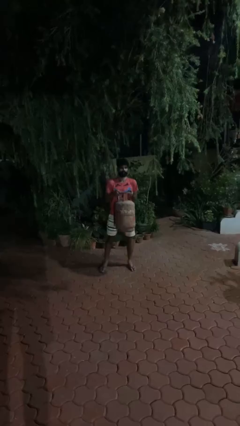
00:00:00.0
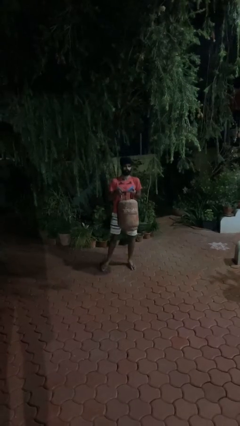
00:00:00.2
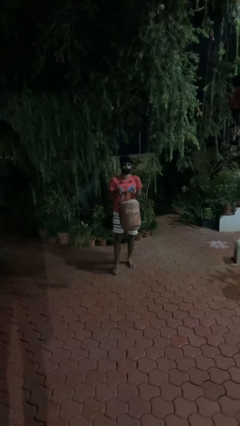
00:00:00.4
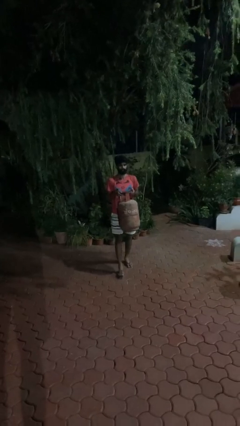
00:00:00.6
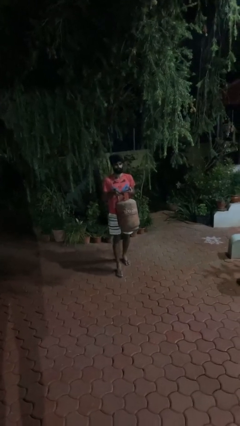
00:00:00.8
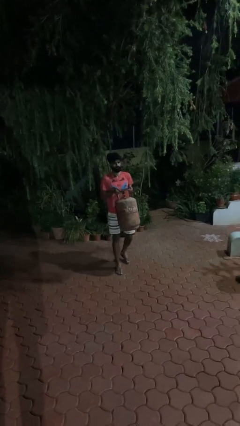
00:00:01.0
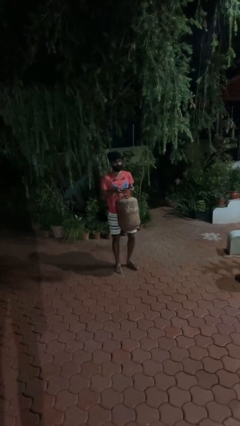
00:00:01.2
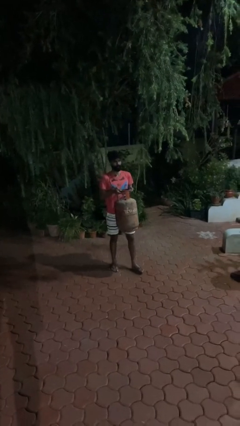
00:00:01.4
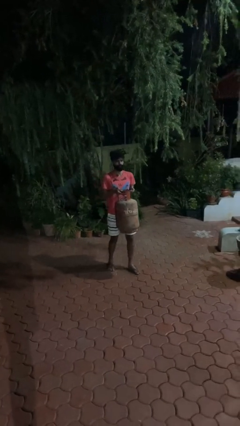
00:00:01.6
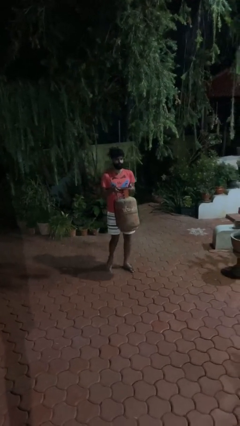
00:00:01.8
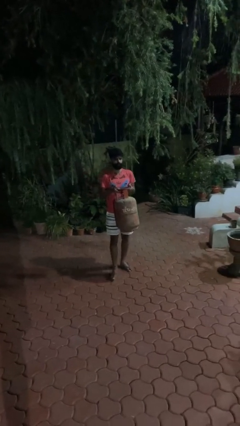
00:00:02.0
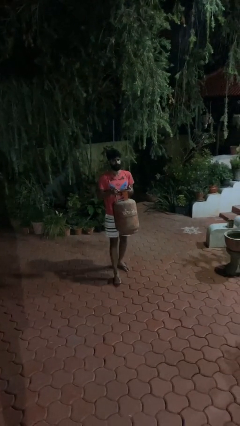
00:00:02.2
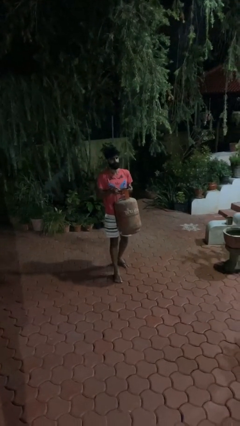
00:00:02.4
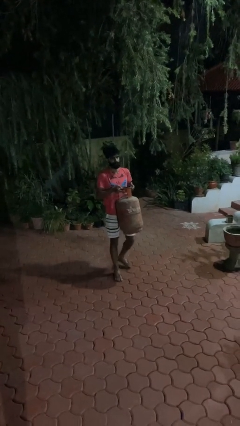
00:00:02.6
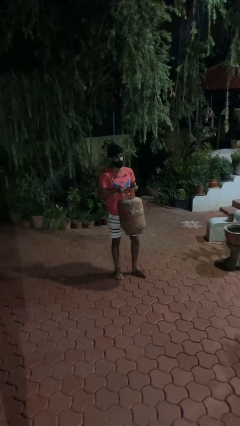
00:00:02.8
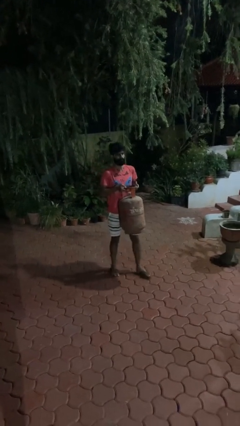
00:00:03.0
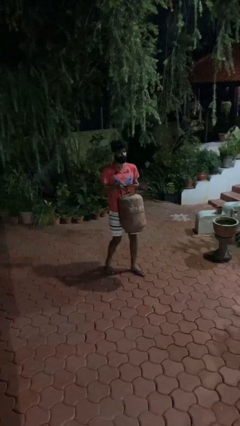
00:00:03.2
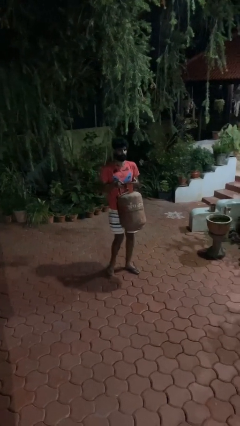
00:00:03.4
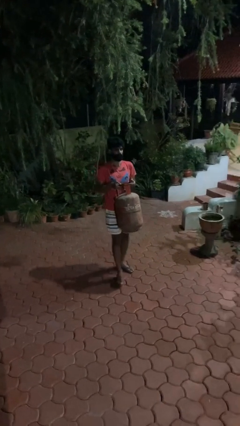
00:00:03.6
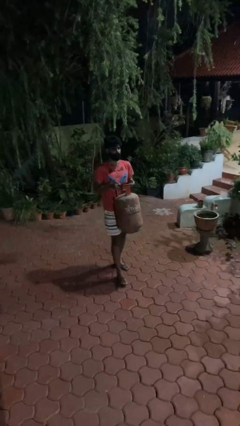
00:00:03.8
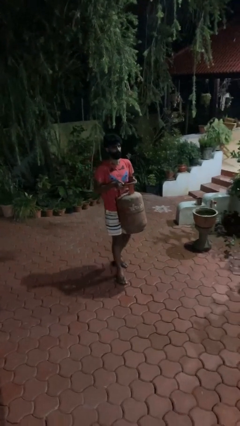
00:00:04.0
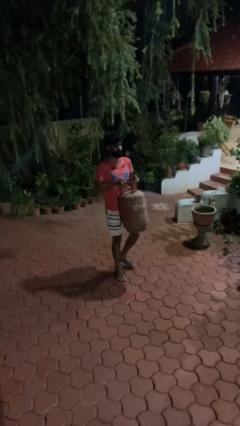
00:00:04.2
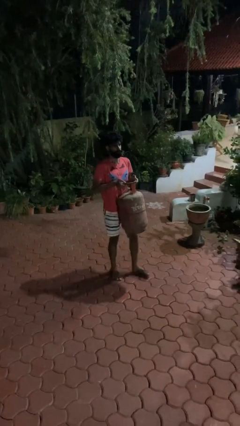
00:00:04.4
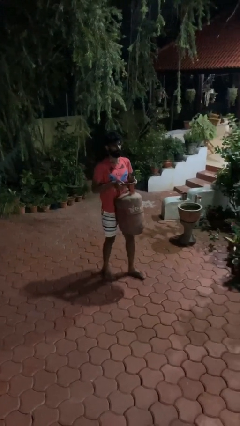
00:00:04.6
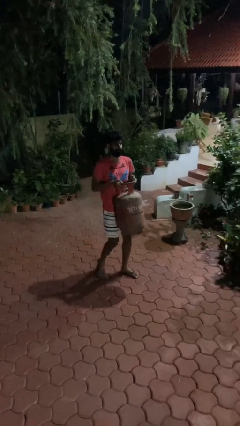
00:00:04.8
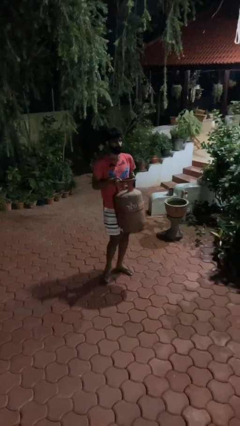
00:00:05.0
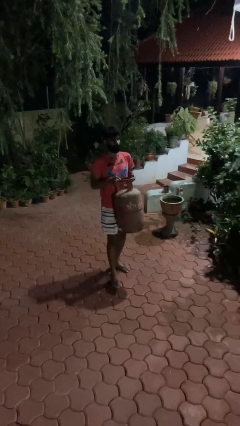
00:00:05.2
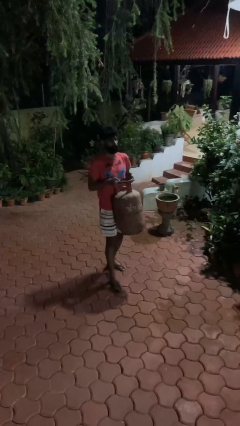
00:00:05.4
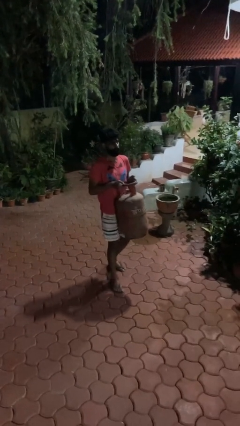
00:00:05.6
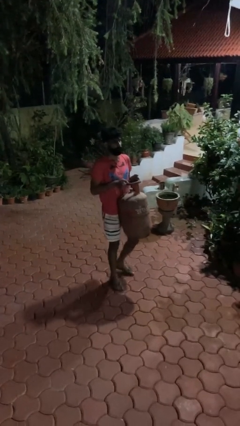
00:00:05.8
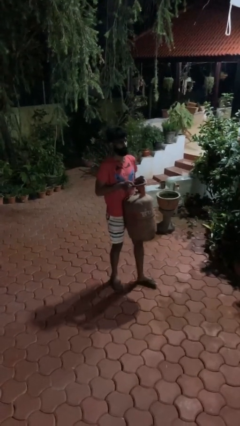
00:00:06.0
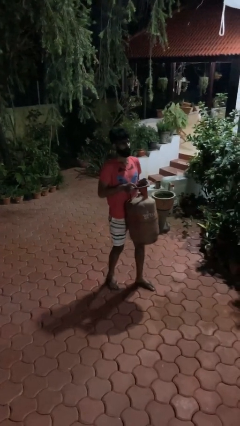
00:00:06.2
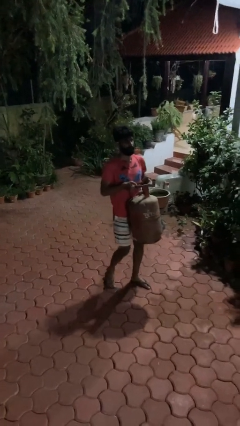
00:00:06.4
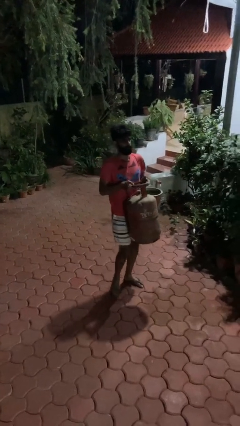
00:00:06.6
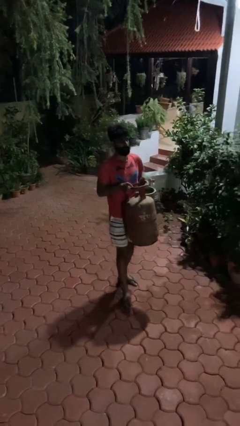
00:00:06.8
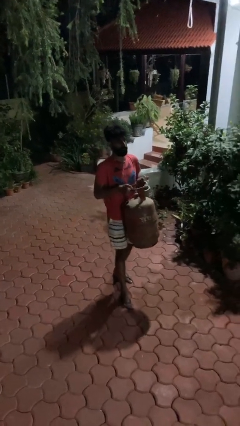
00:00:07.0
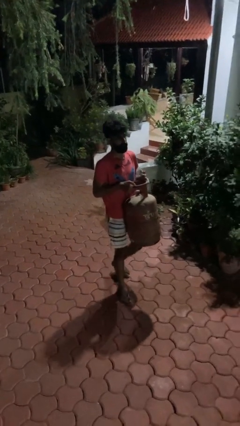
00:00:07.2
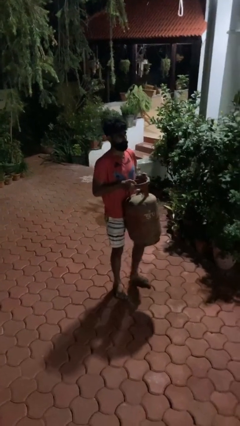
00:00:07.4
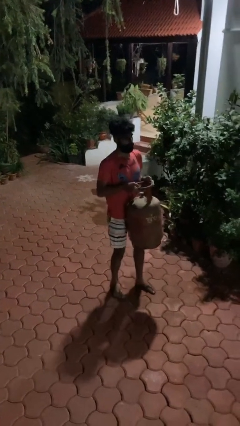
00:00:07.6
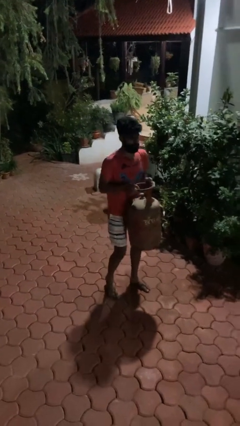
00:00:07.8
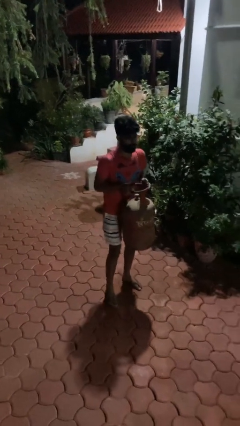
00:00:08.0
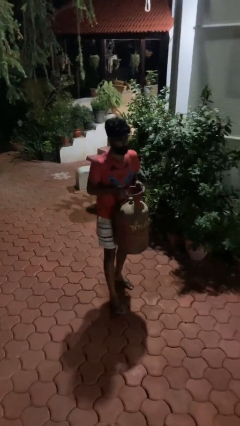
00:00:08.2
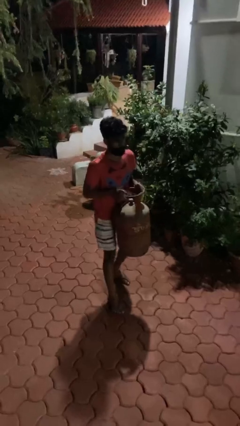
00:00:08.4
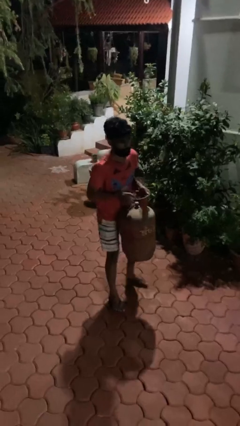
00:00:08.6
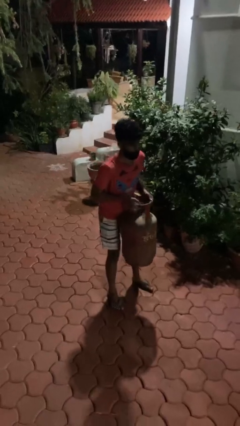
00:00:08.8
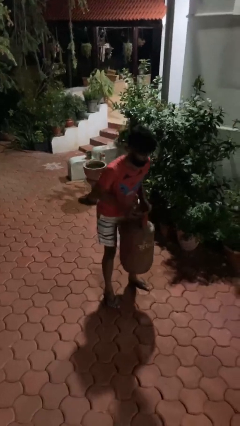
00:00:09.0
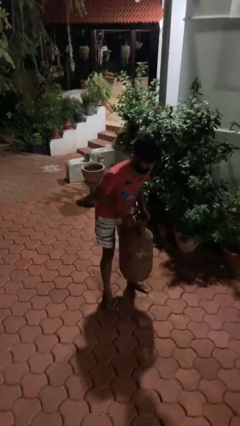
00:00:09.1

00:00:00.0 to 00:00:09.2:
person carries heavy object

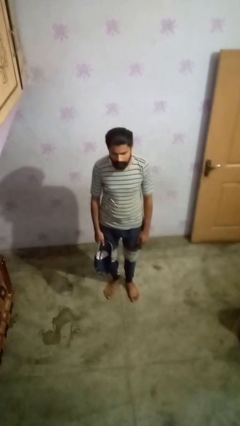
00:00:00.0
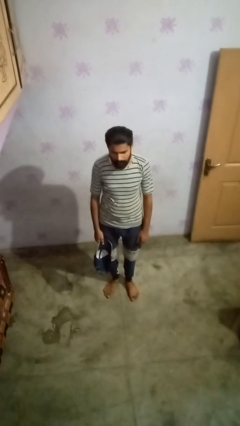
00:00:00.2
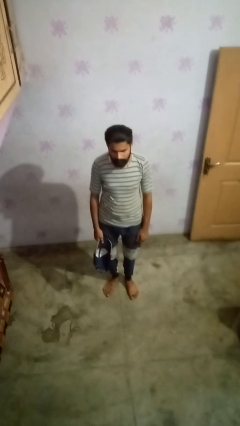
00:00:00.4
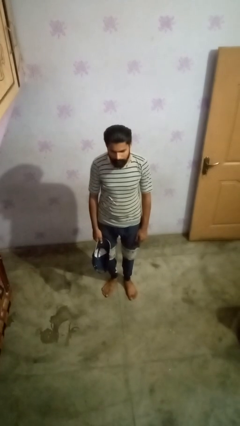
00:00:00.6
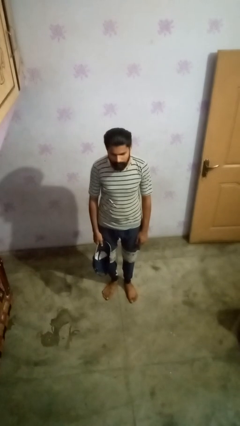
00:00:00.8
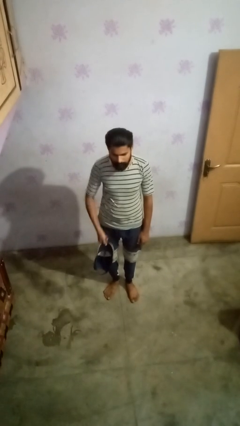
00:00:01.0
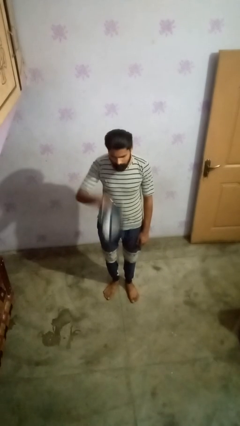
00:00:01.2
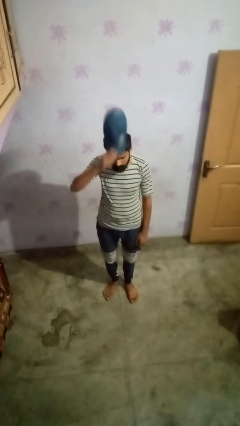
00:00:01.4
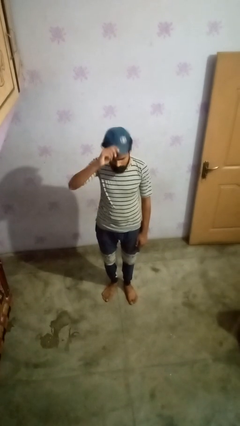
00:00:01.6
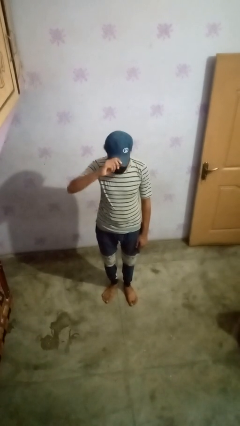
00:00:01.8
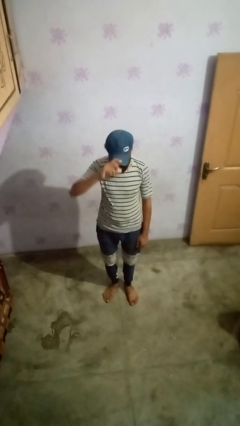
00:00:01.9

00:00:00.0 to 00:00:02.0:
person puts on hat

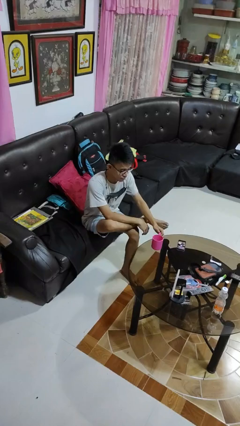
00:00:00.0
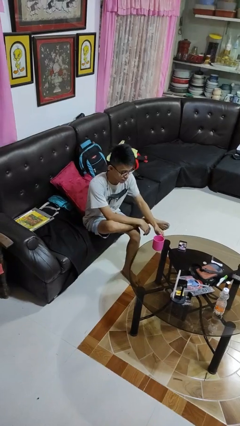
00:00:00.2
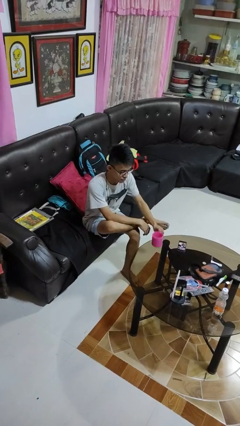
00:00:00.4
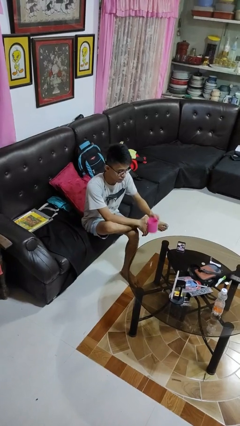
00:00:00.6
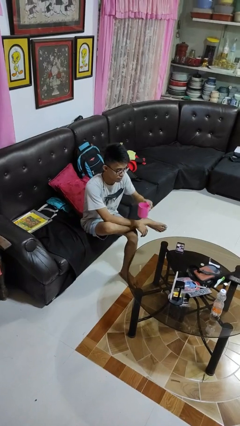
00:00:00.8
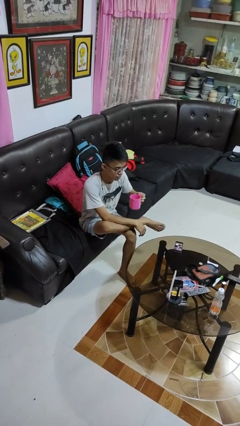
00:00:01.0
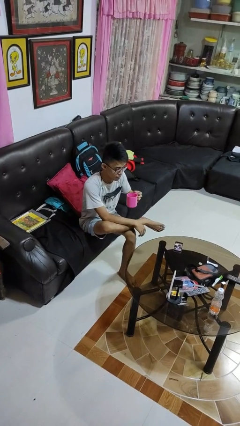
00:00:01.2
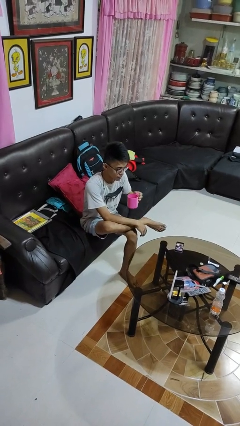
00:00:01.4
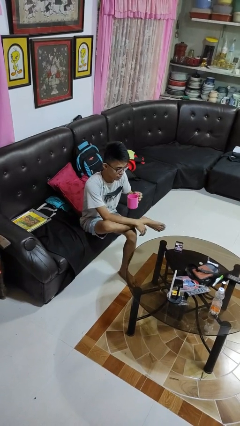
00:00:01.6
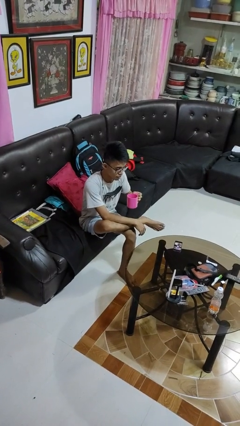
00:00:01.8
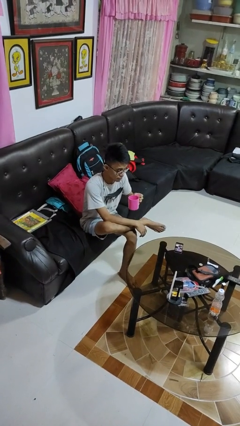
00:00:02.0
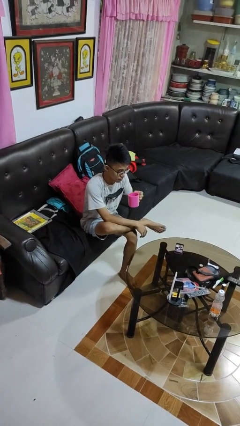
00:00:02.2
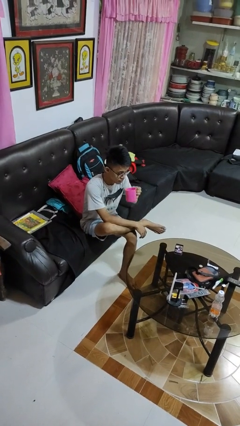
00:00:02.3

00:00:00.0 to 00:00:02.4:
person picks up object from table

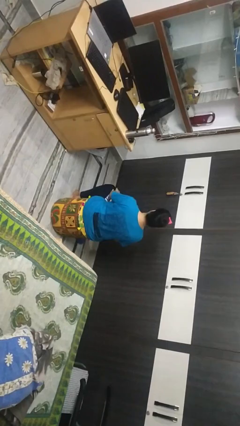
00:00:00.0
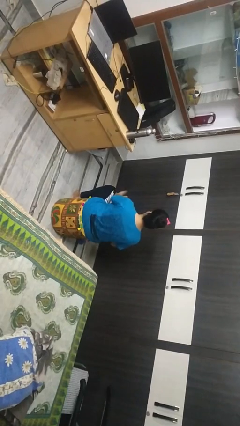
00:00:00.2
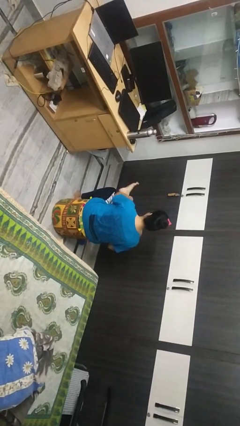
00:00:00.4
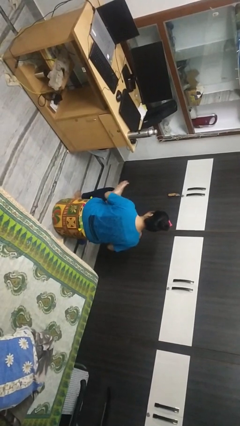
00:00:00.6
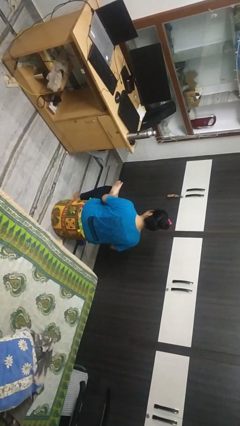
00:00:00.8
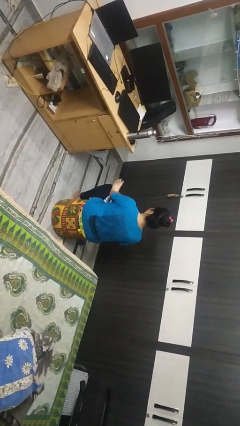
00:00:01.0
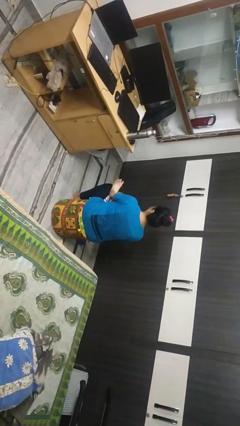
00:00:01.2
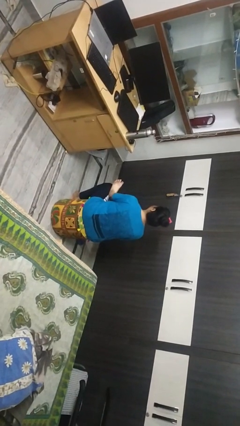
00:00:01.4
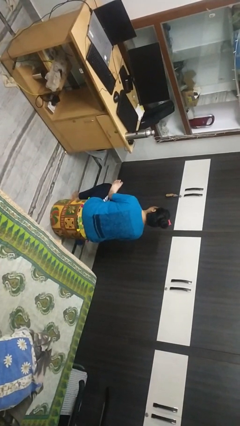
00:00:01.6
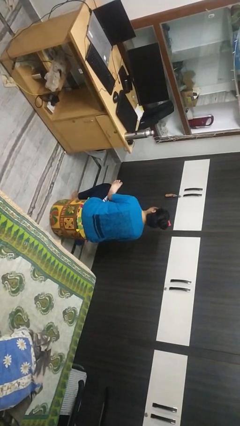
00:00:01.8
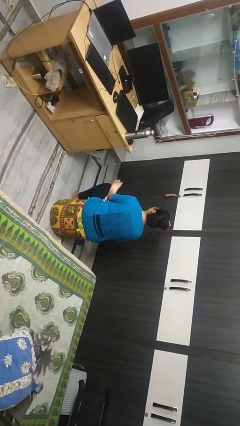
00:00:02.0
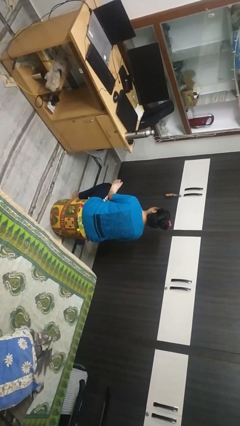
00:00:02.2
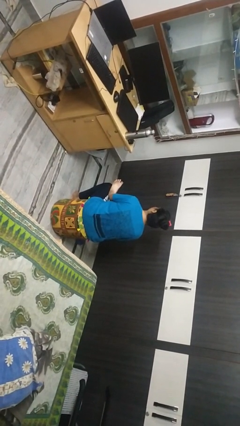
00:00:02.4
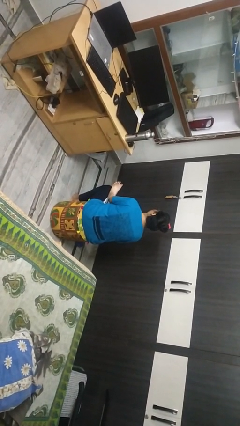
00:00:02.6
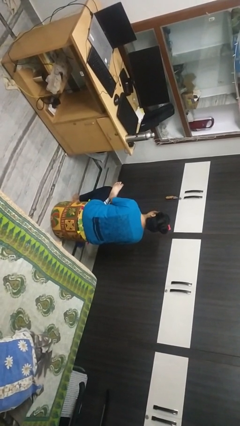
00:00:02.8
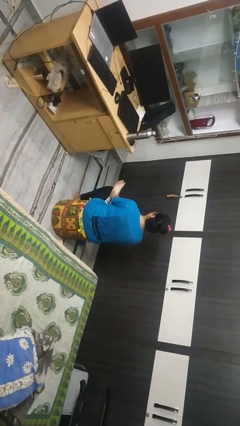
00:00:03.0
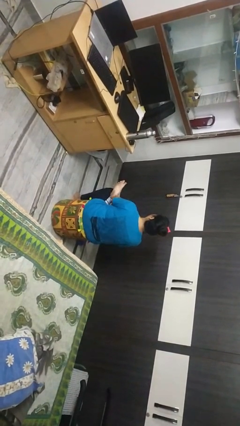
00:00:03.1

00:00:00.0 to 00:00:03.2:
person crosses legs

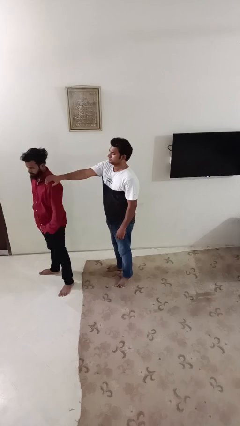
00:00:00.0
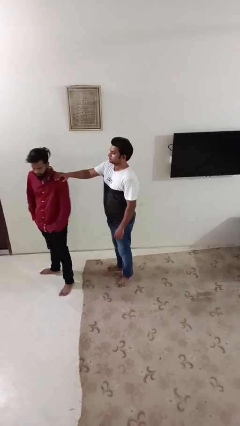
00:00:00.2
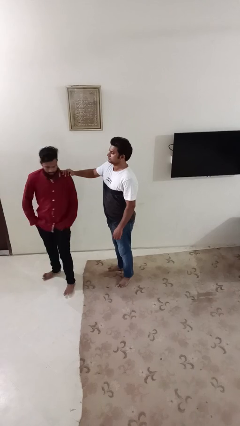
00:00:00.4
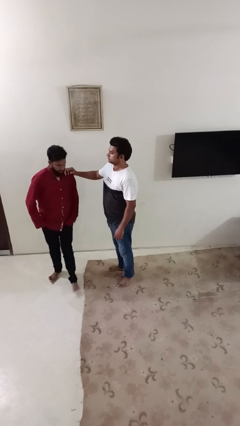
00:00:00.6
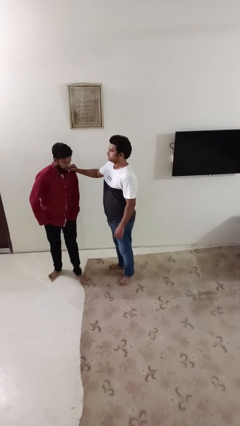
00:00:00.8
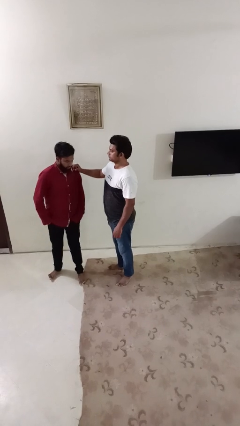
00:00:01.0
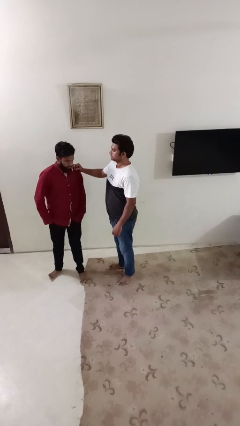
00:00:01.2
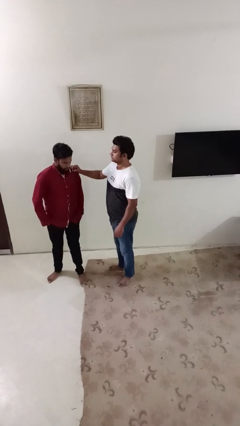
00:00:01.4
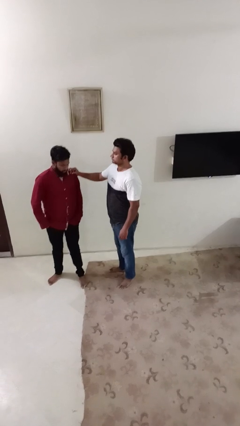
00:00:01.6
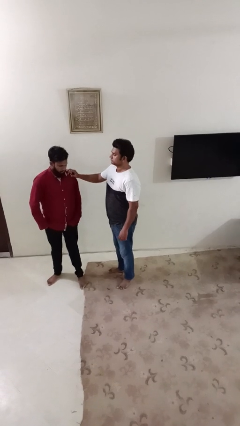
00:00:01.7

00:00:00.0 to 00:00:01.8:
person spins person around
